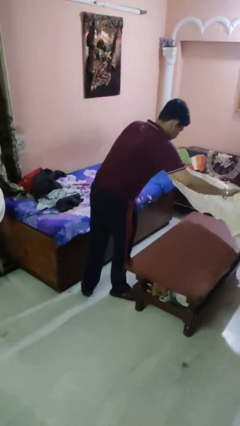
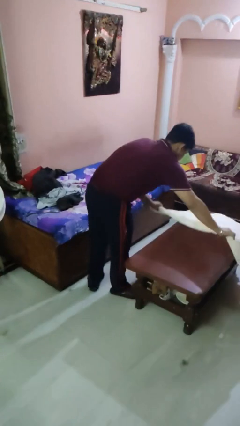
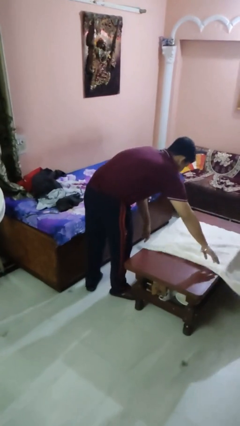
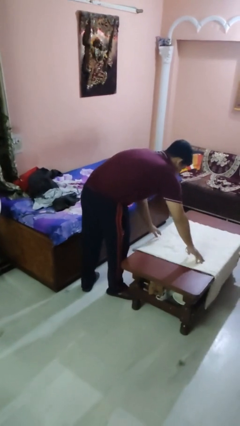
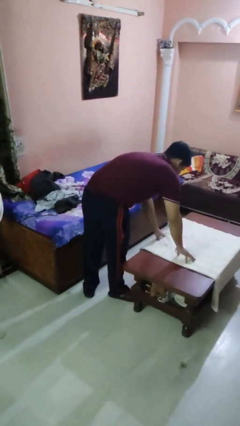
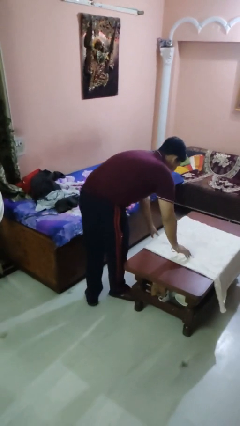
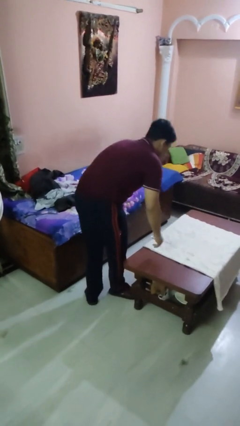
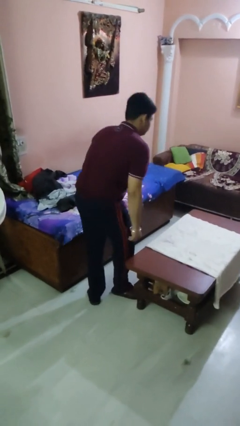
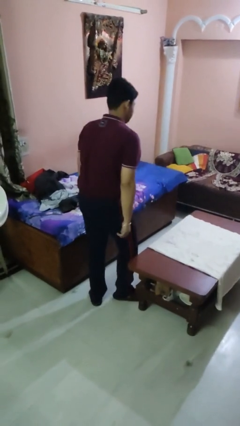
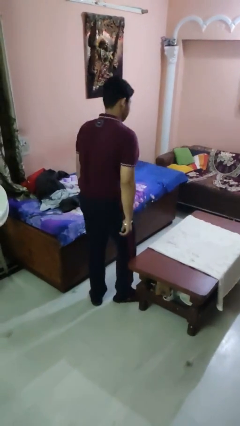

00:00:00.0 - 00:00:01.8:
person spreads tablecloth

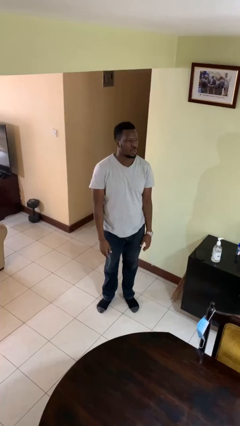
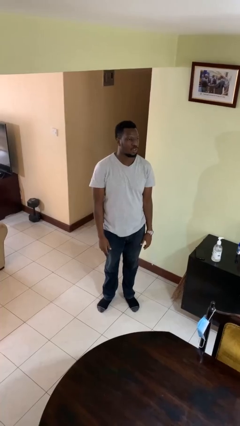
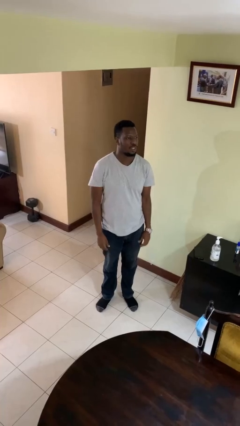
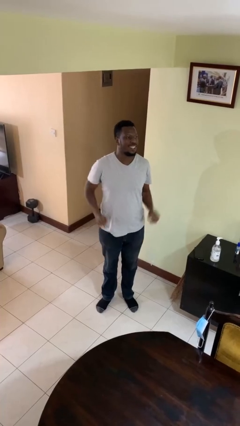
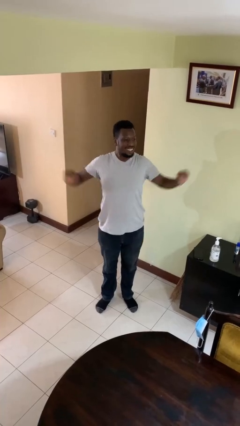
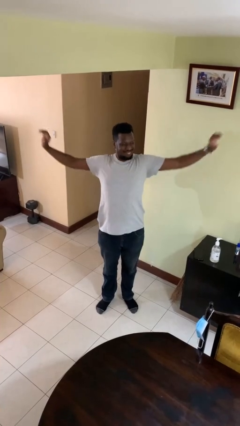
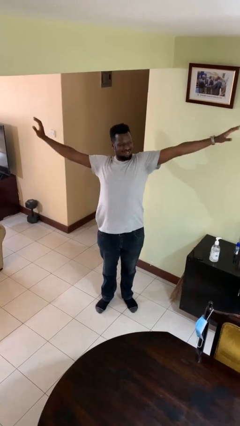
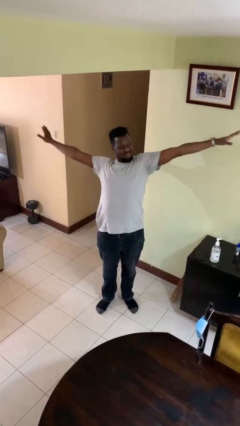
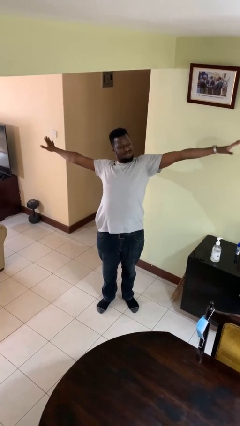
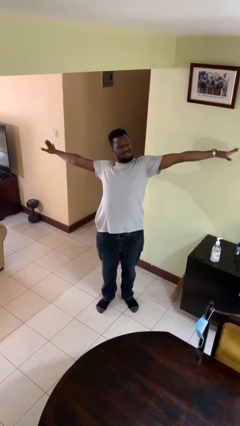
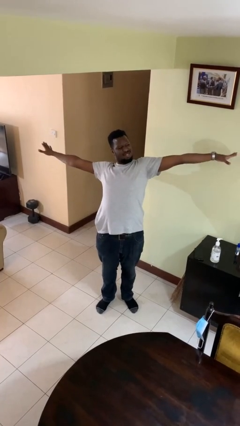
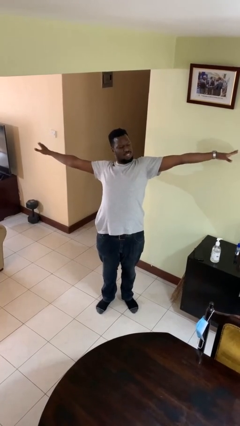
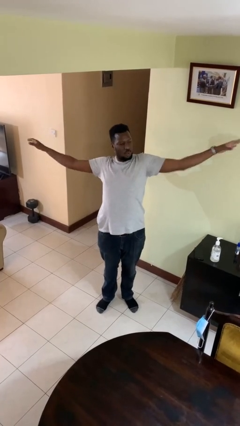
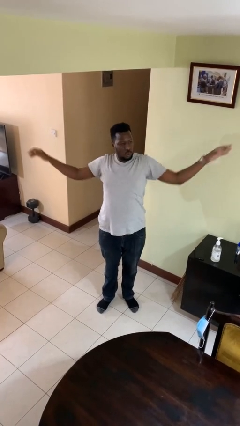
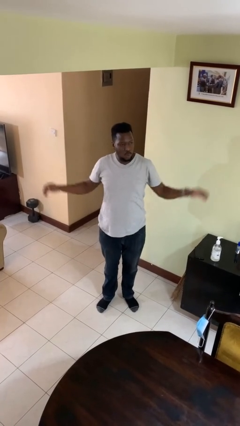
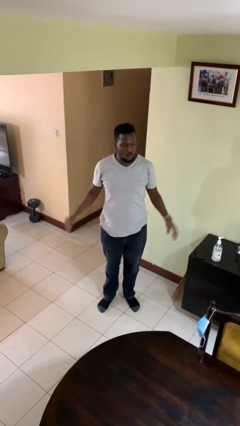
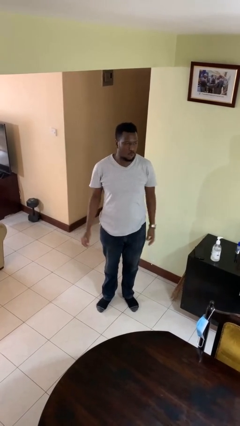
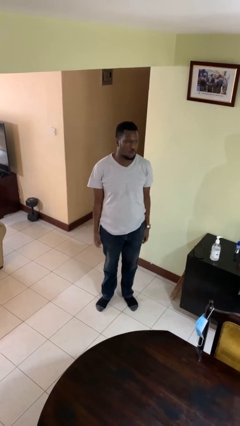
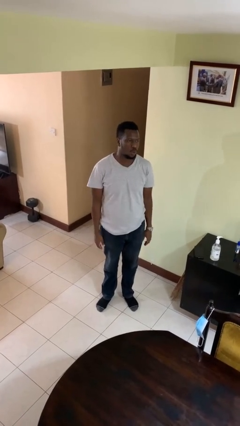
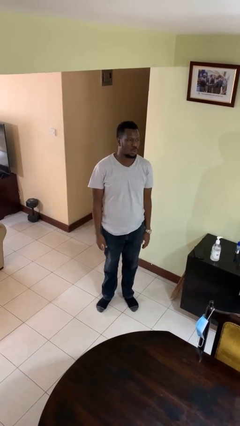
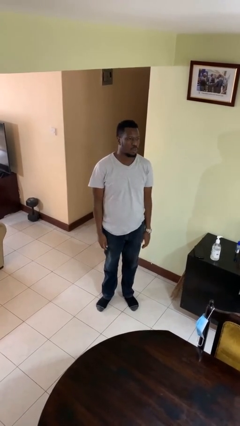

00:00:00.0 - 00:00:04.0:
person stretches arms to side

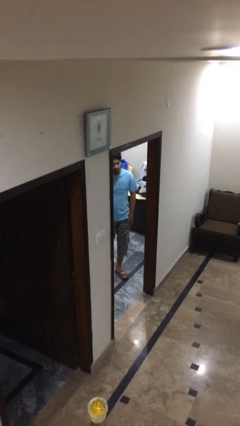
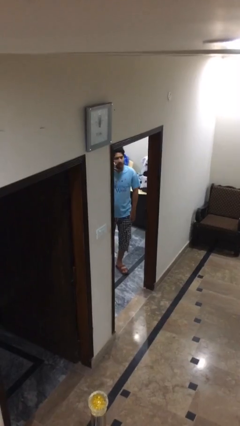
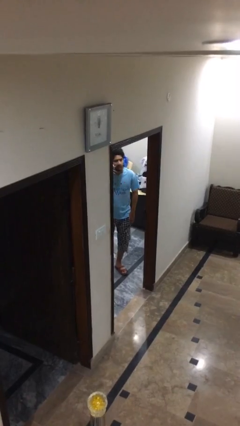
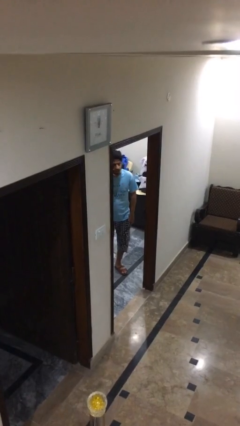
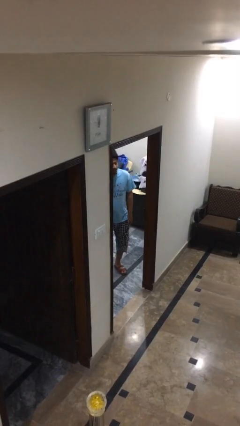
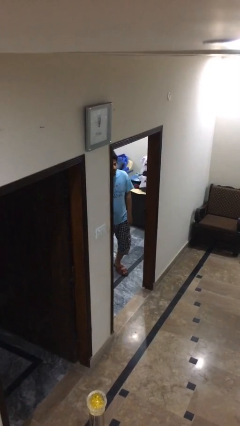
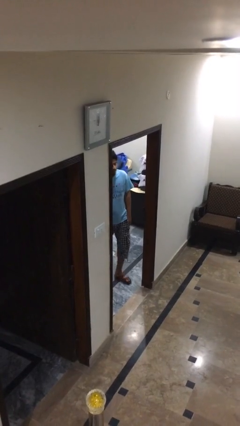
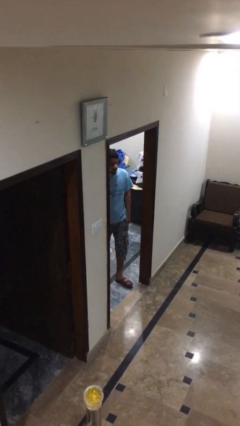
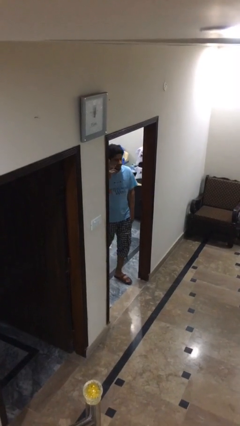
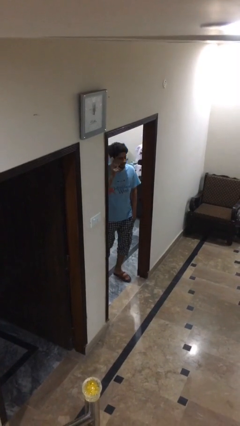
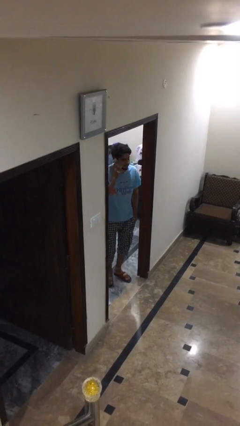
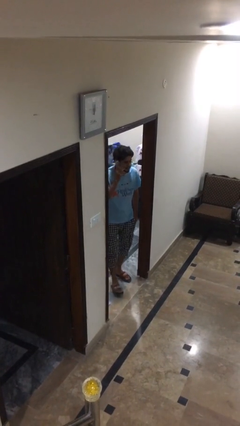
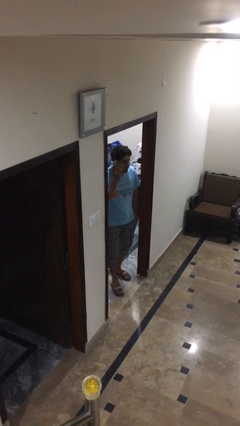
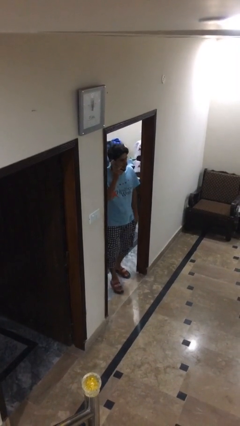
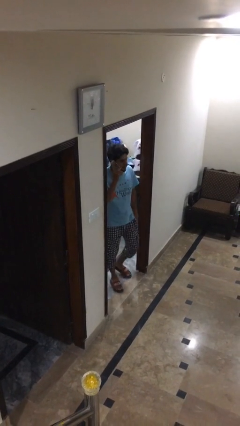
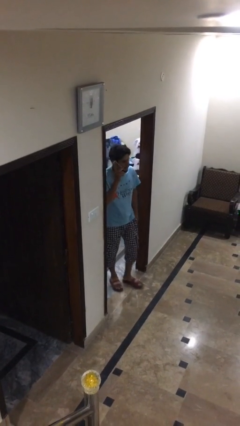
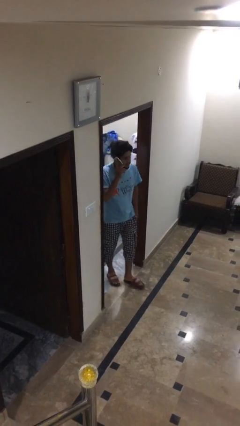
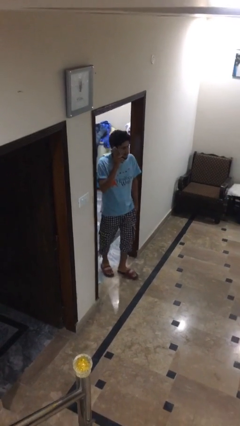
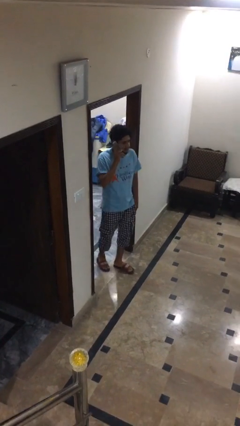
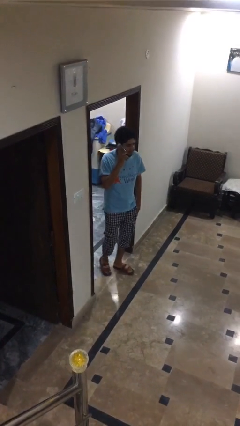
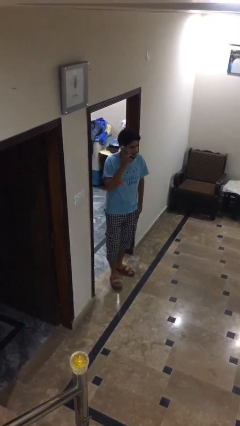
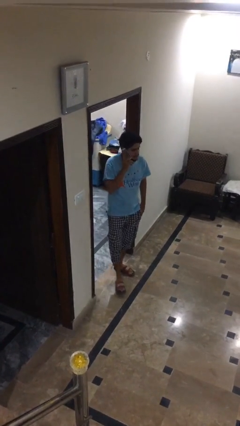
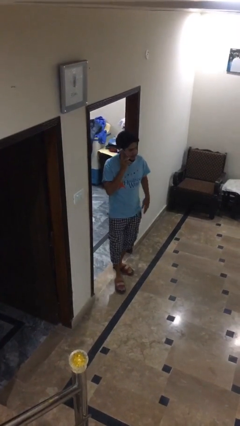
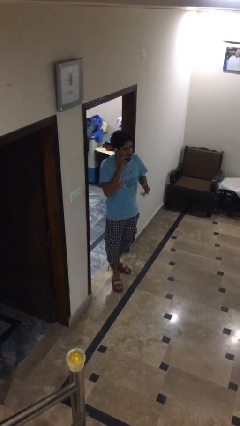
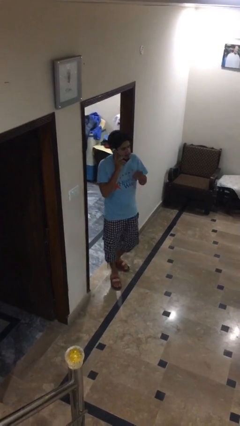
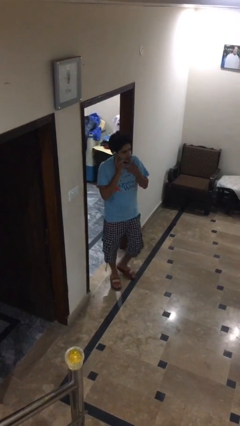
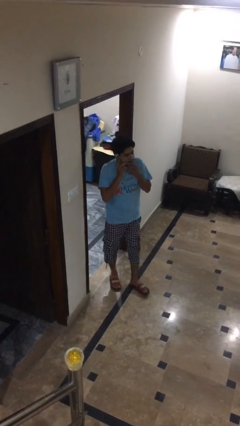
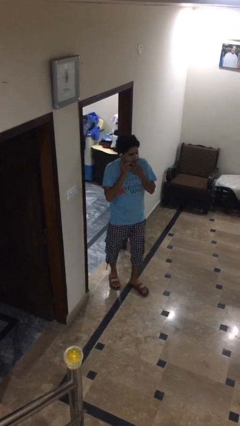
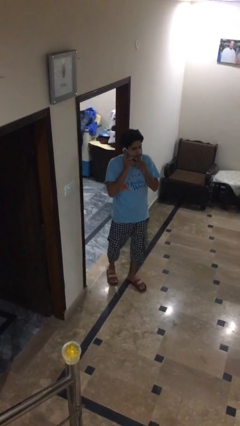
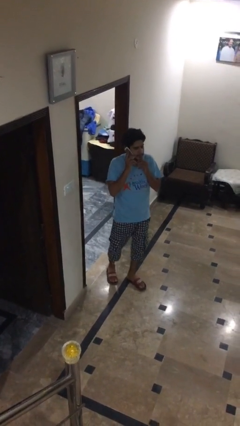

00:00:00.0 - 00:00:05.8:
person enters scene through structure

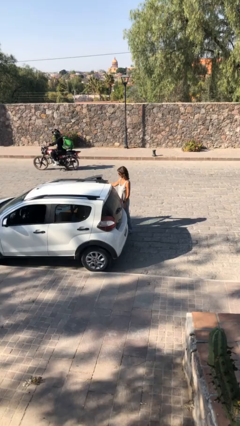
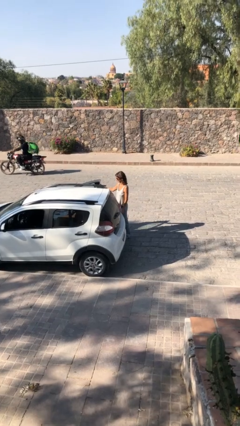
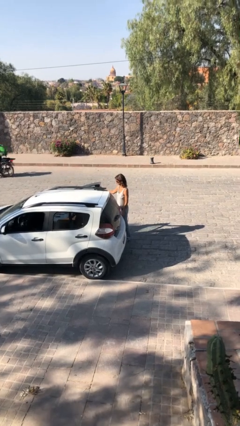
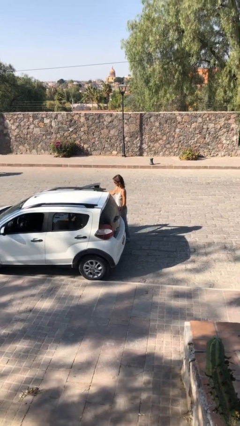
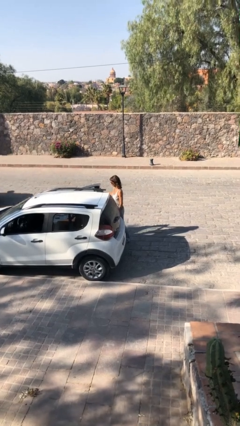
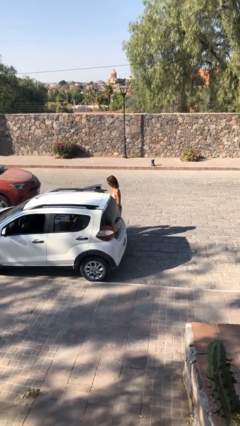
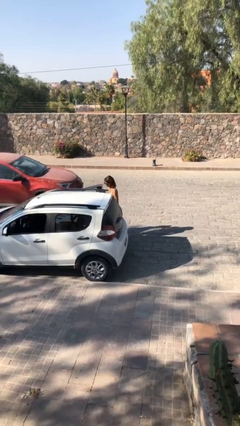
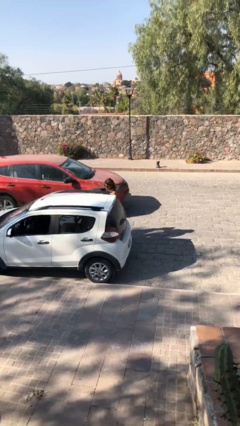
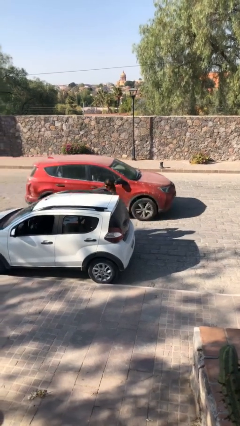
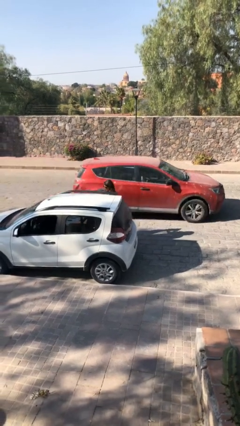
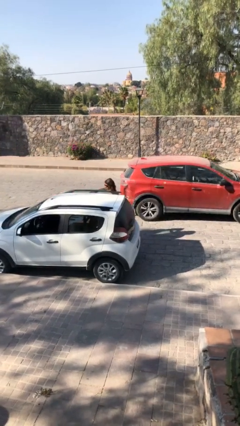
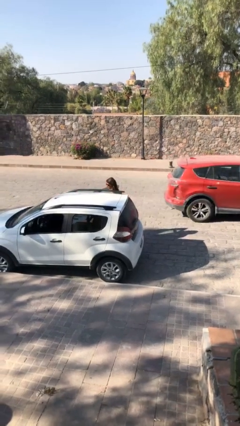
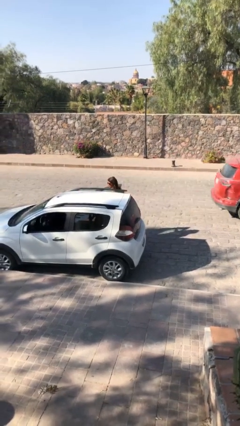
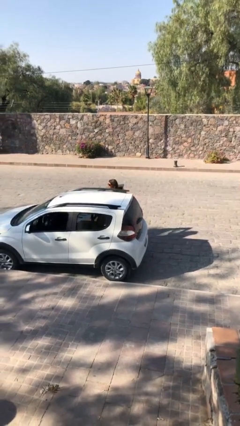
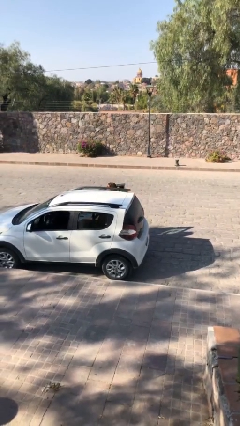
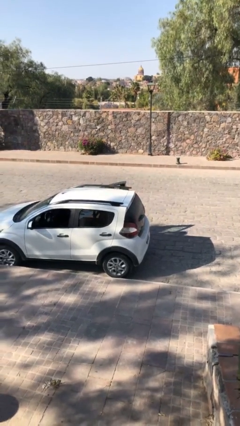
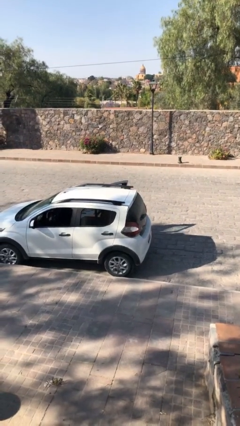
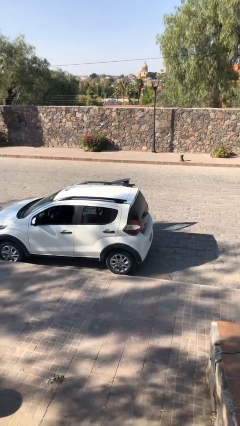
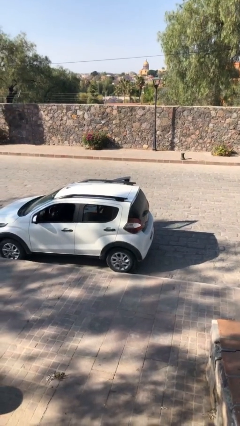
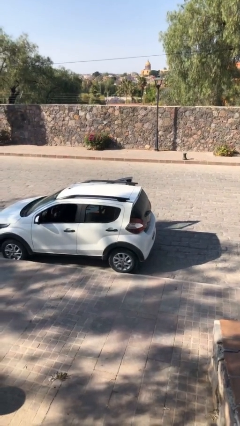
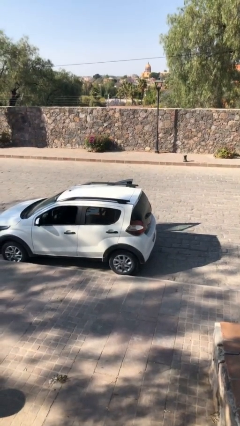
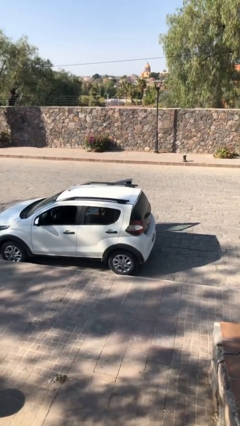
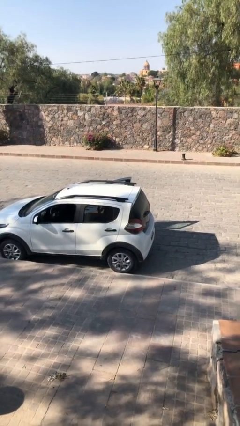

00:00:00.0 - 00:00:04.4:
person enters car

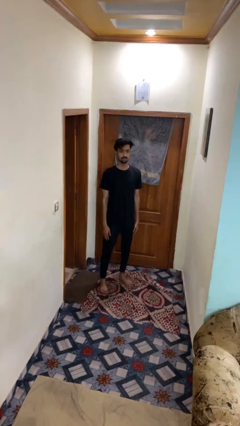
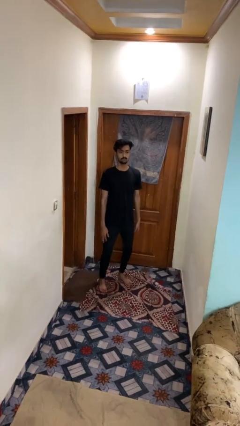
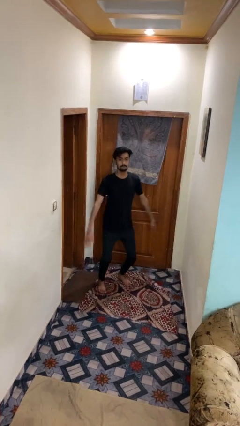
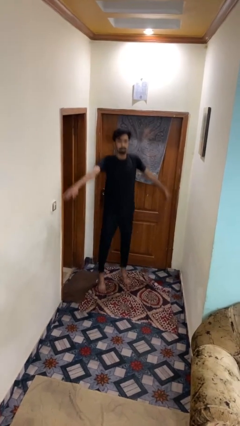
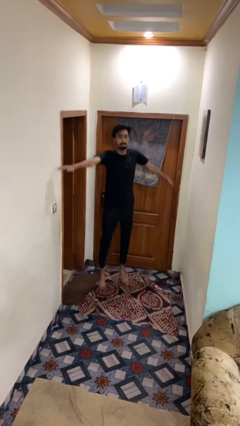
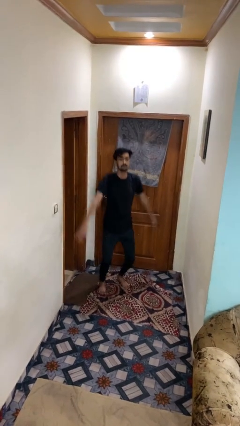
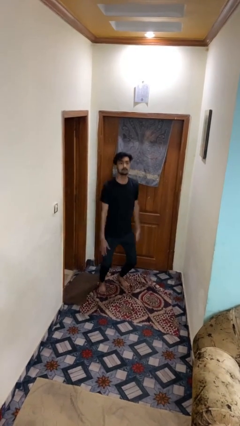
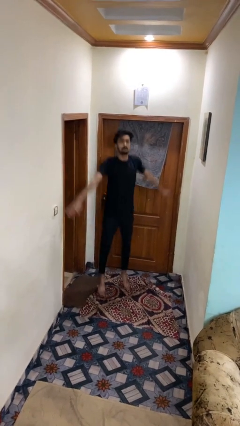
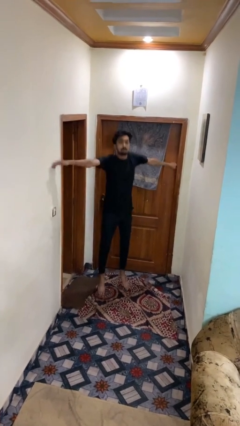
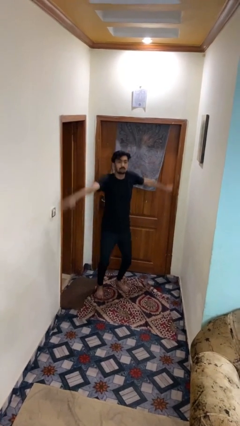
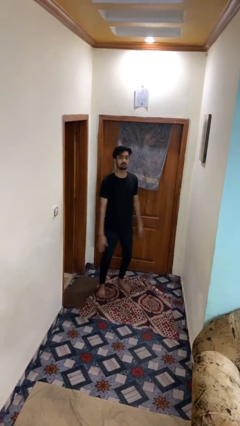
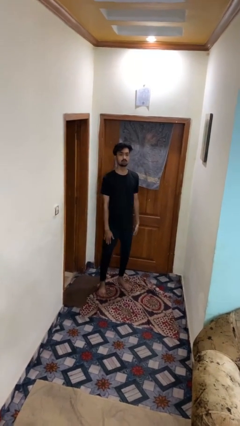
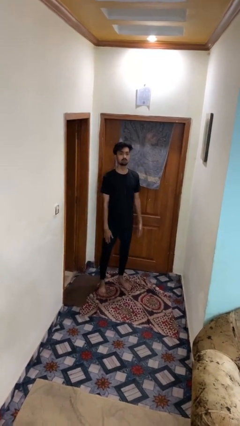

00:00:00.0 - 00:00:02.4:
person exercises with jumping jacks
